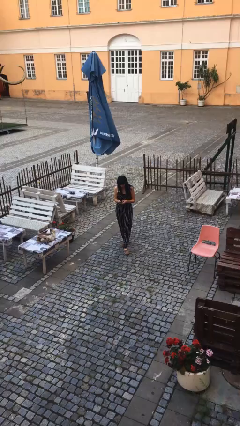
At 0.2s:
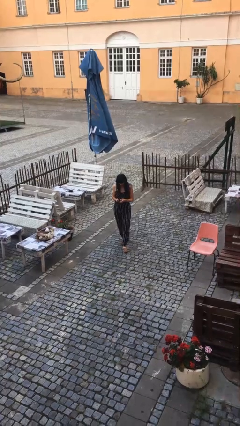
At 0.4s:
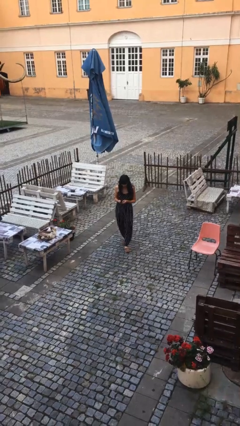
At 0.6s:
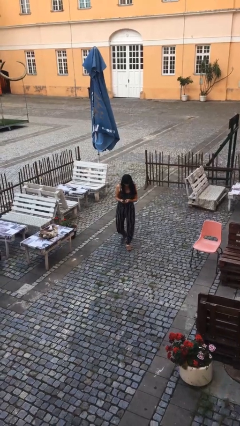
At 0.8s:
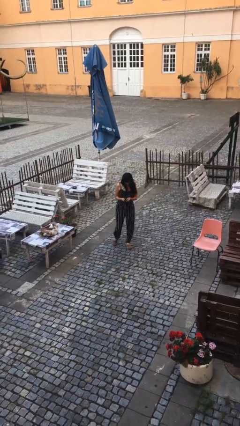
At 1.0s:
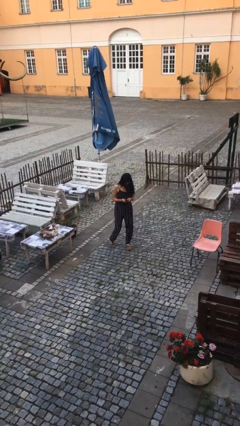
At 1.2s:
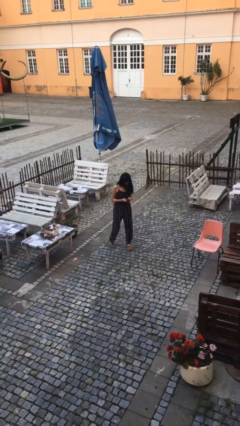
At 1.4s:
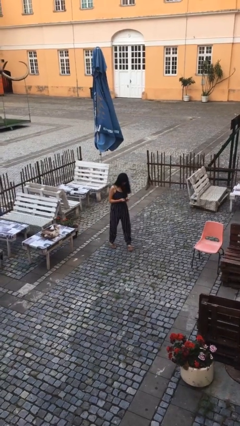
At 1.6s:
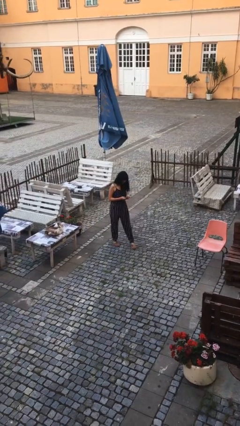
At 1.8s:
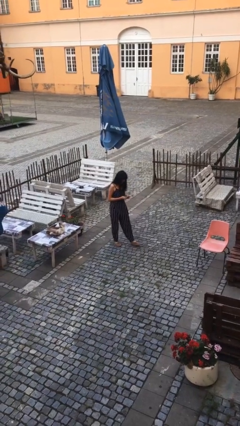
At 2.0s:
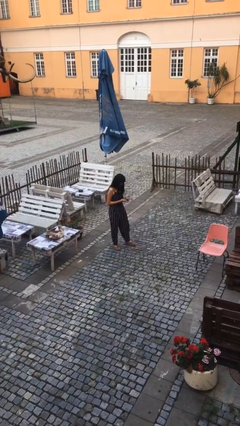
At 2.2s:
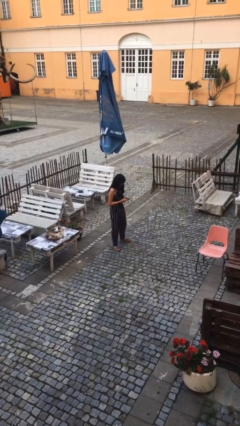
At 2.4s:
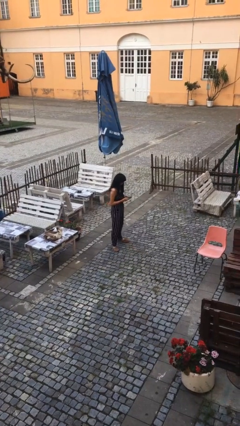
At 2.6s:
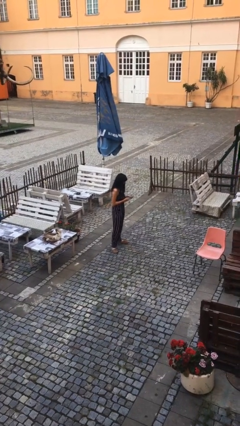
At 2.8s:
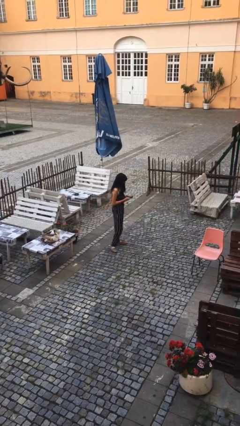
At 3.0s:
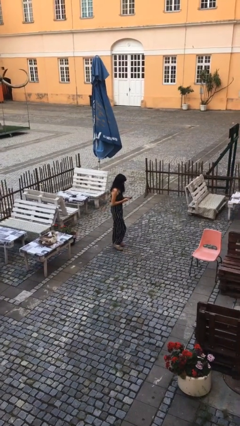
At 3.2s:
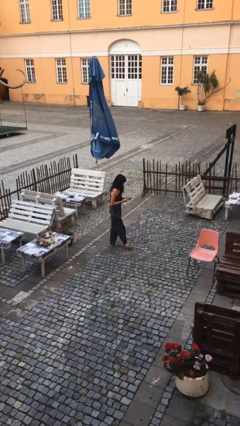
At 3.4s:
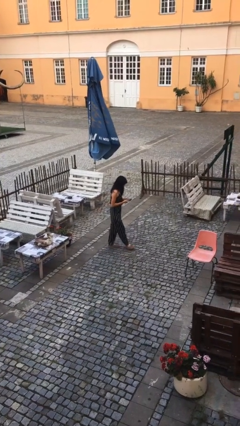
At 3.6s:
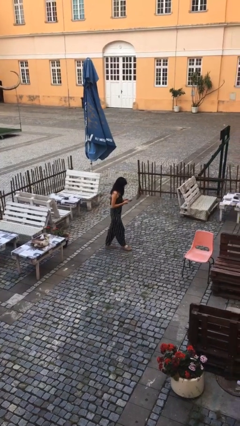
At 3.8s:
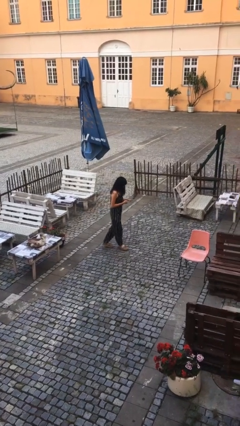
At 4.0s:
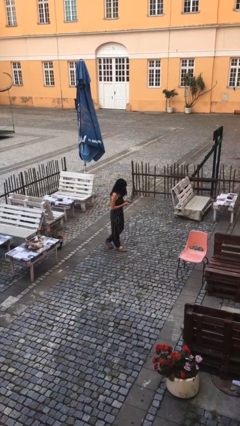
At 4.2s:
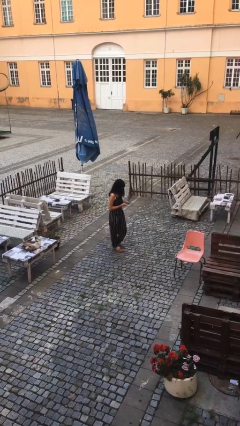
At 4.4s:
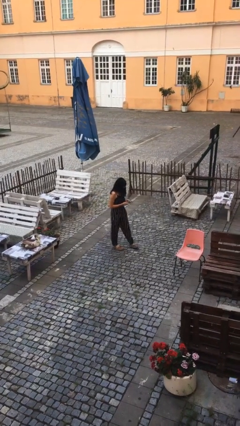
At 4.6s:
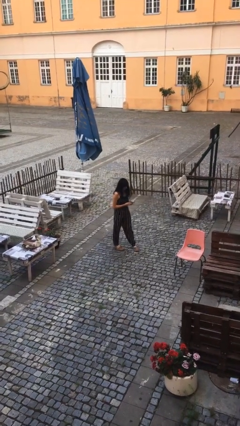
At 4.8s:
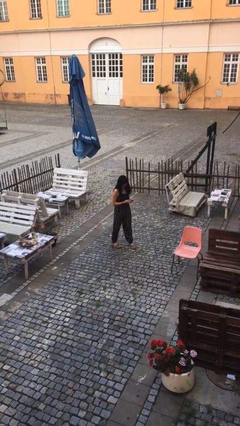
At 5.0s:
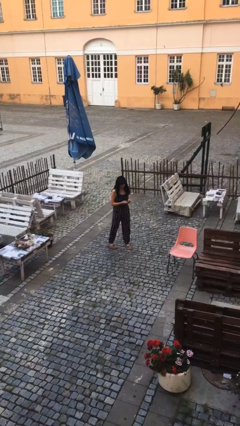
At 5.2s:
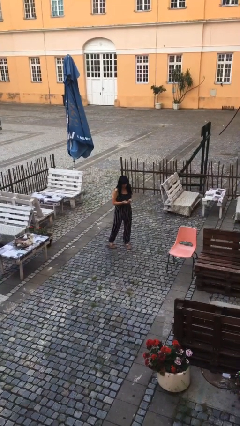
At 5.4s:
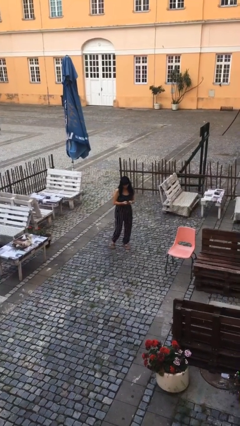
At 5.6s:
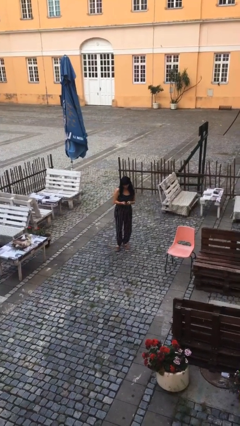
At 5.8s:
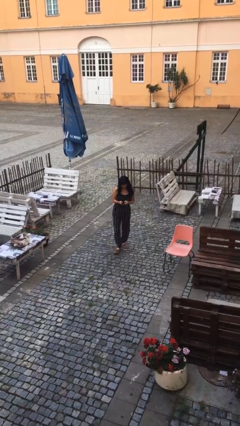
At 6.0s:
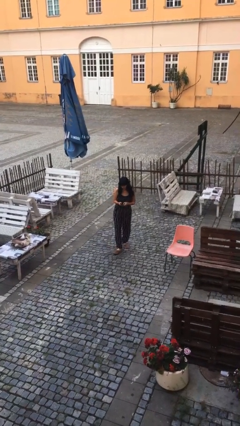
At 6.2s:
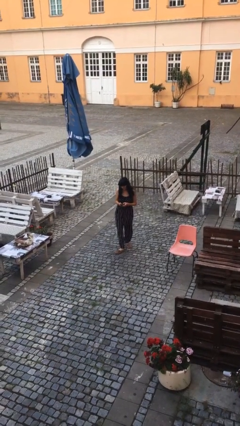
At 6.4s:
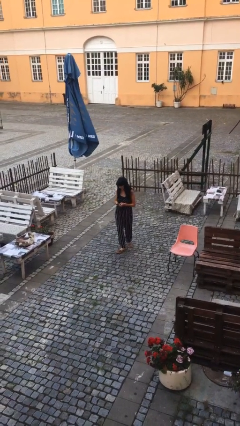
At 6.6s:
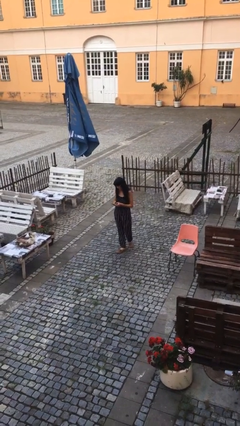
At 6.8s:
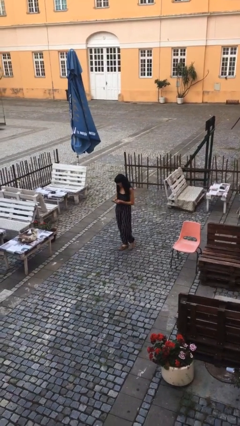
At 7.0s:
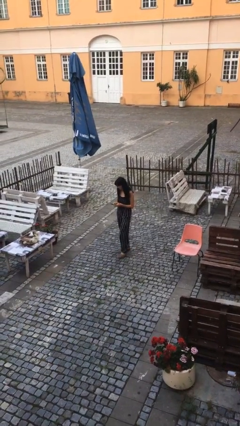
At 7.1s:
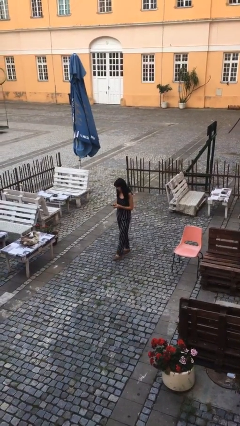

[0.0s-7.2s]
person texts on phone

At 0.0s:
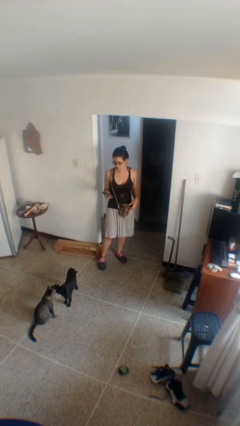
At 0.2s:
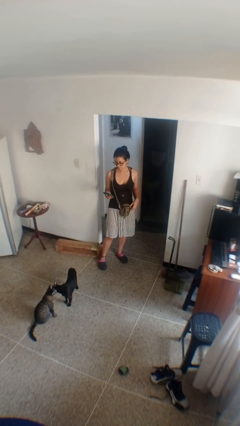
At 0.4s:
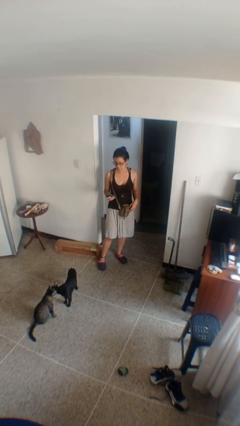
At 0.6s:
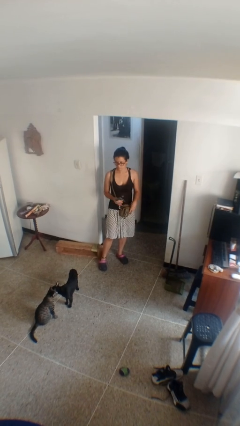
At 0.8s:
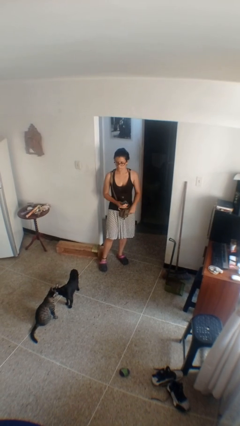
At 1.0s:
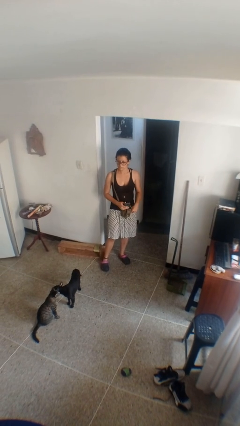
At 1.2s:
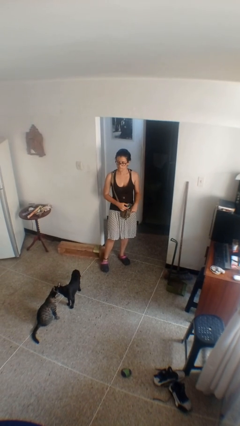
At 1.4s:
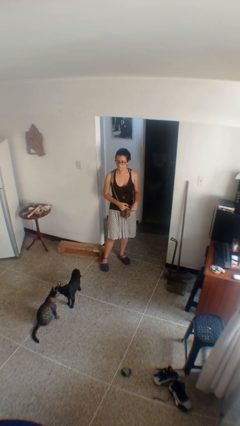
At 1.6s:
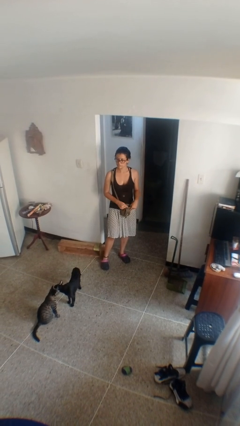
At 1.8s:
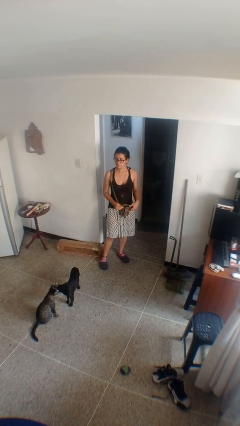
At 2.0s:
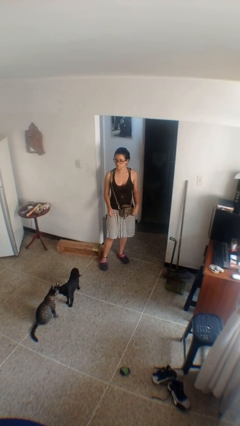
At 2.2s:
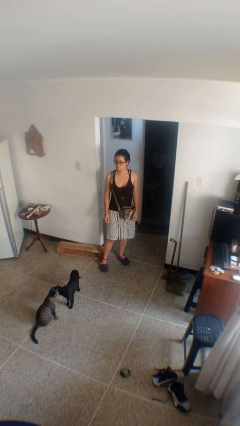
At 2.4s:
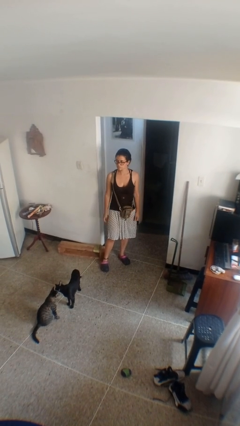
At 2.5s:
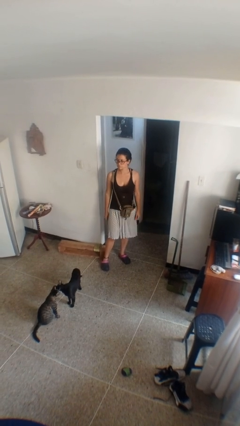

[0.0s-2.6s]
person puts phone into pocket

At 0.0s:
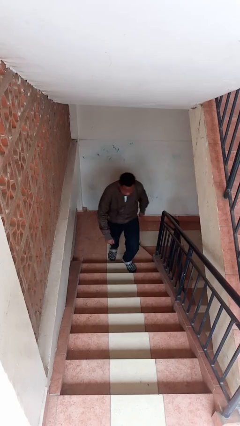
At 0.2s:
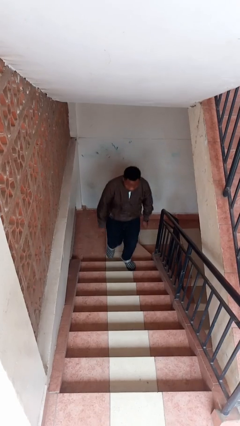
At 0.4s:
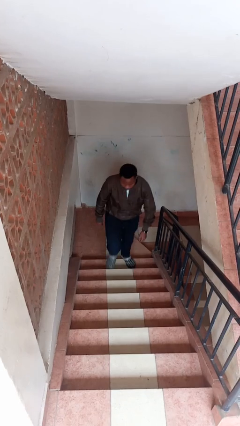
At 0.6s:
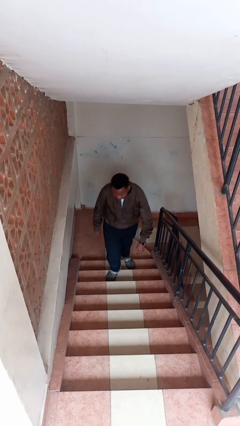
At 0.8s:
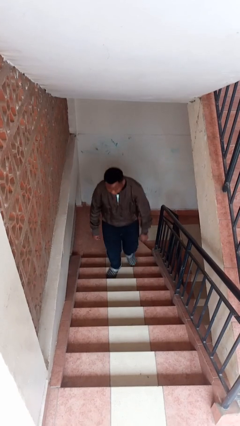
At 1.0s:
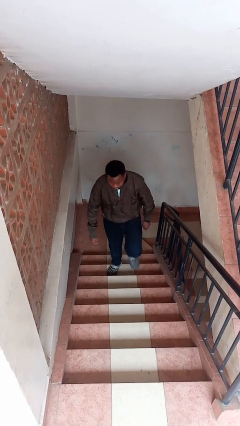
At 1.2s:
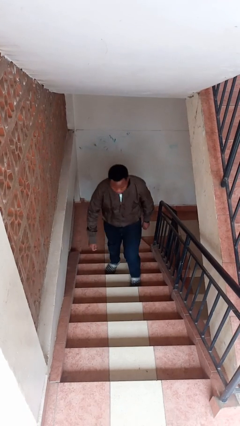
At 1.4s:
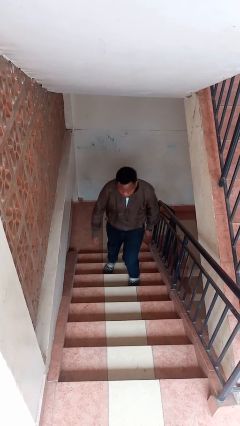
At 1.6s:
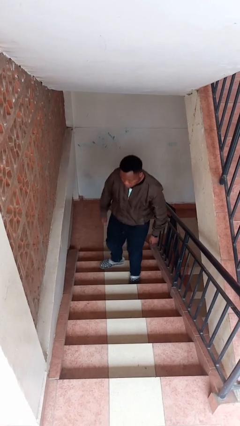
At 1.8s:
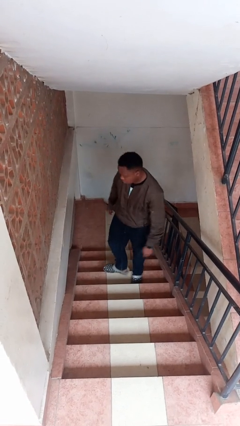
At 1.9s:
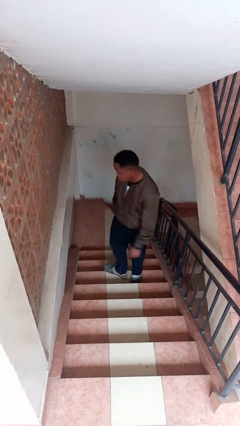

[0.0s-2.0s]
person climbs up stairs

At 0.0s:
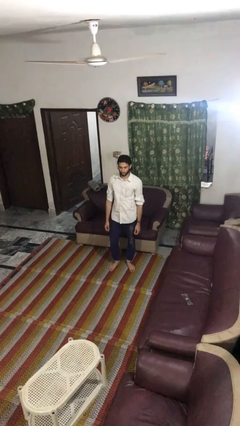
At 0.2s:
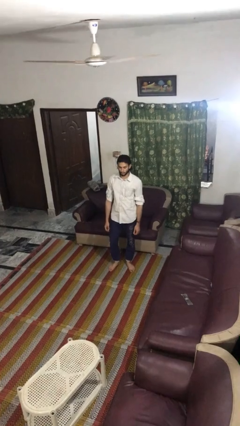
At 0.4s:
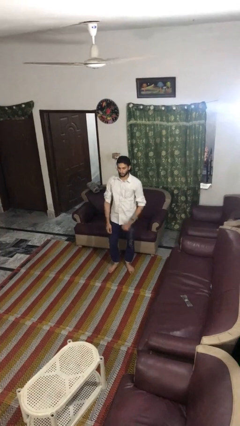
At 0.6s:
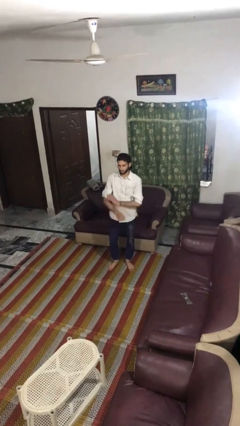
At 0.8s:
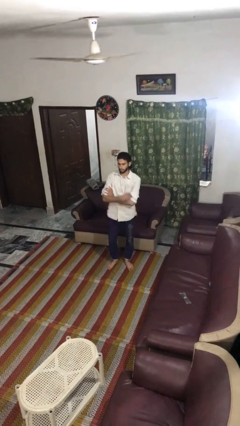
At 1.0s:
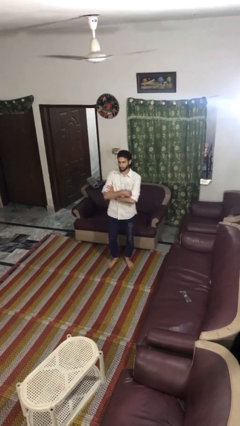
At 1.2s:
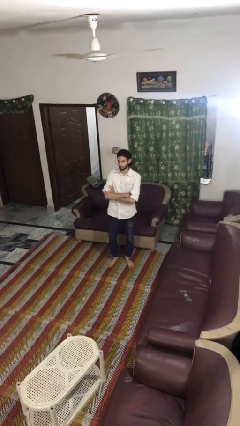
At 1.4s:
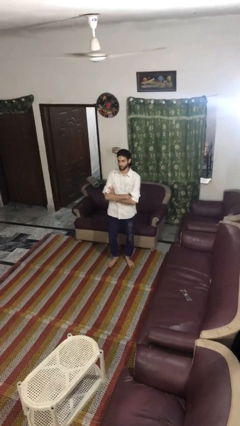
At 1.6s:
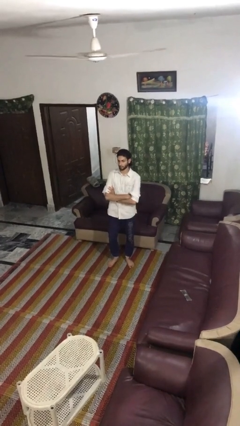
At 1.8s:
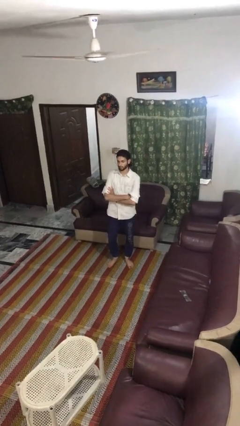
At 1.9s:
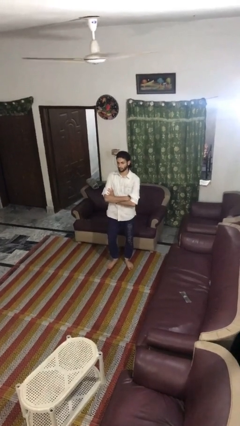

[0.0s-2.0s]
person crosses arms

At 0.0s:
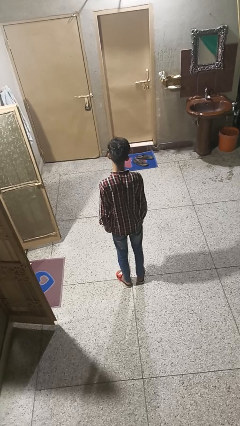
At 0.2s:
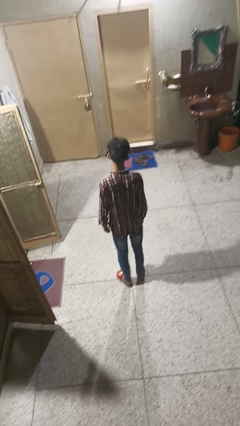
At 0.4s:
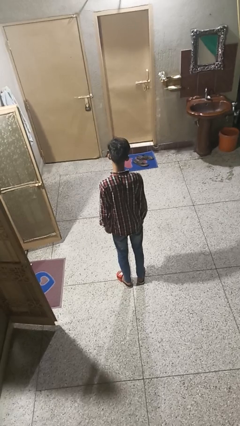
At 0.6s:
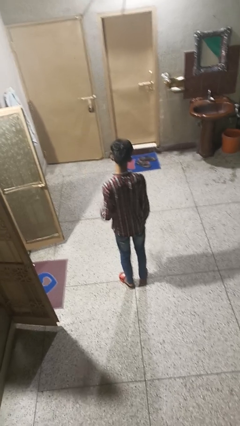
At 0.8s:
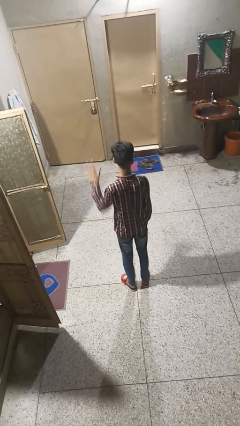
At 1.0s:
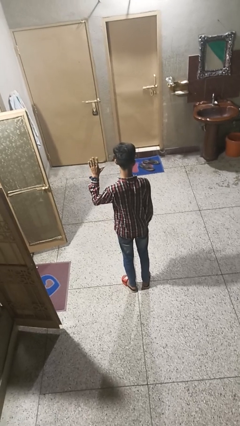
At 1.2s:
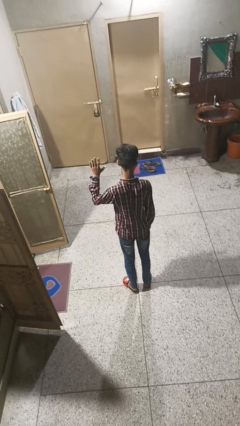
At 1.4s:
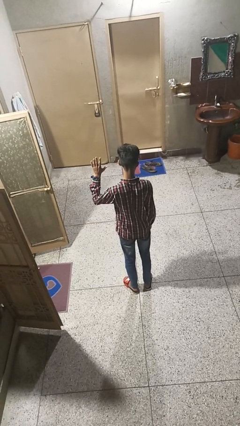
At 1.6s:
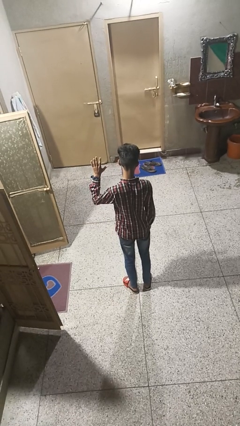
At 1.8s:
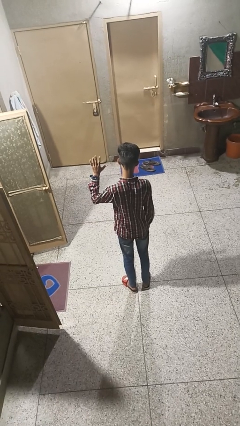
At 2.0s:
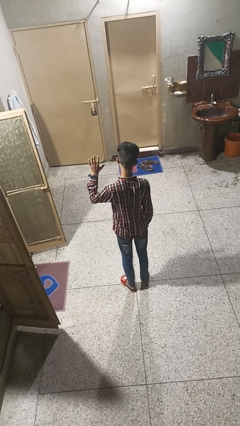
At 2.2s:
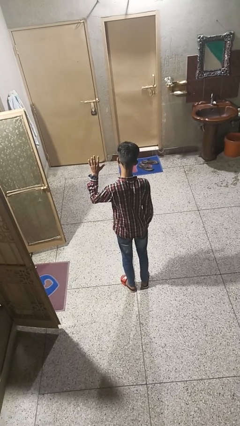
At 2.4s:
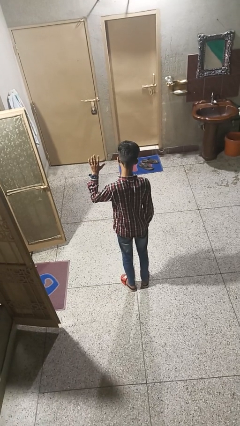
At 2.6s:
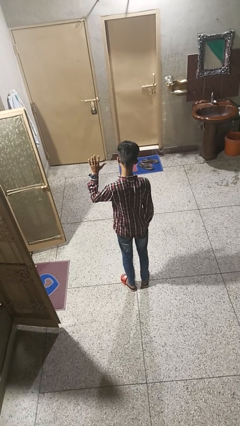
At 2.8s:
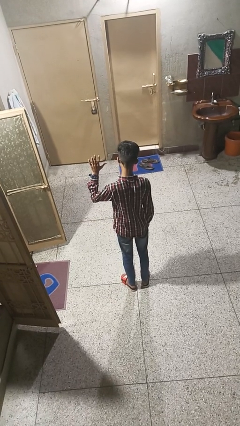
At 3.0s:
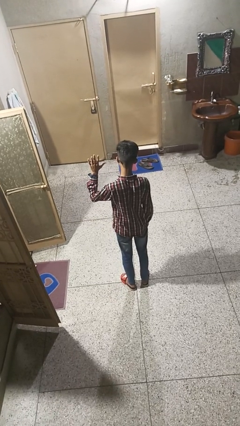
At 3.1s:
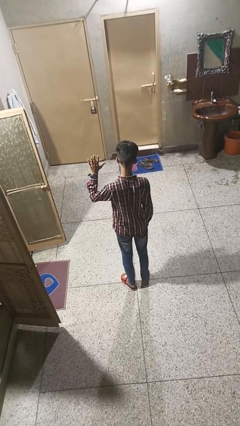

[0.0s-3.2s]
person gestures number five

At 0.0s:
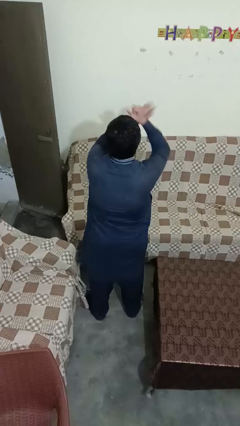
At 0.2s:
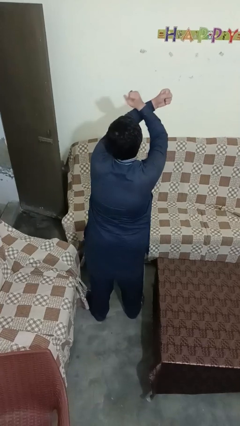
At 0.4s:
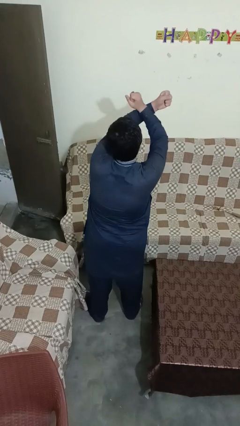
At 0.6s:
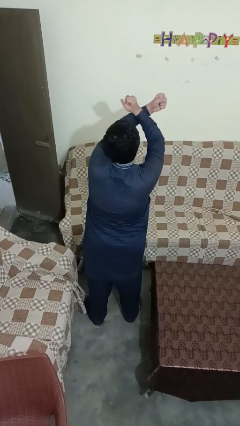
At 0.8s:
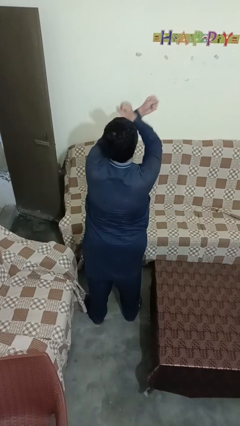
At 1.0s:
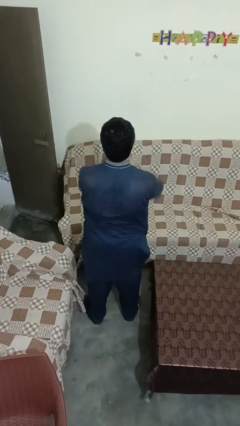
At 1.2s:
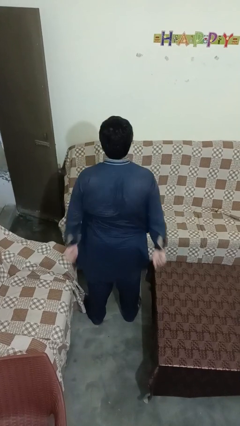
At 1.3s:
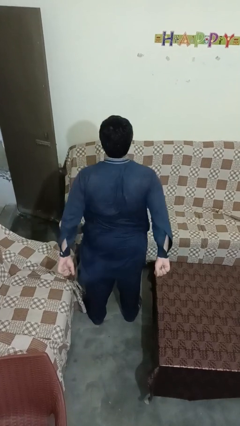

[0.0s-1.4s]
person gestures arms x
